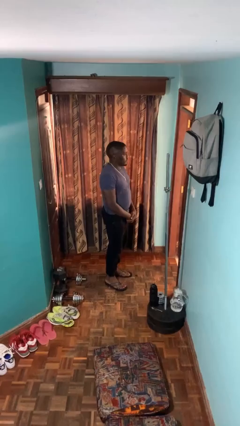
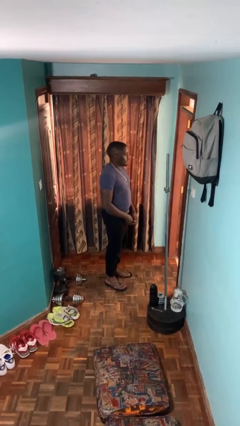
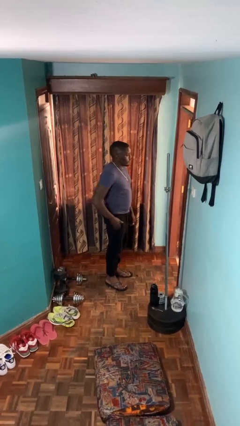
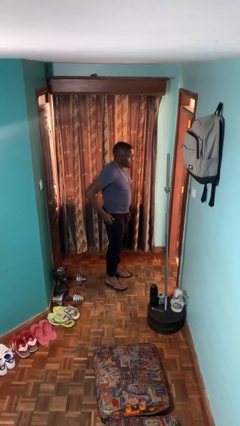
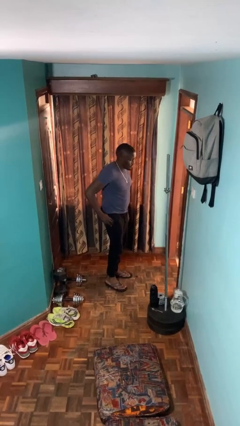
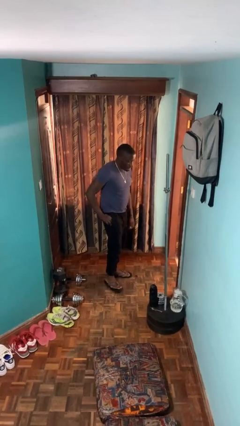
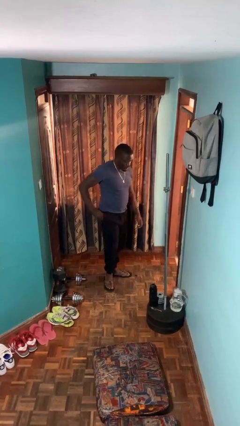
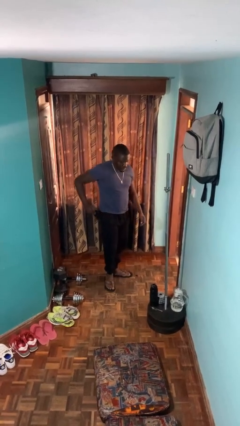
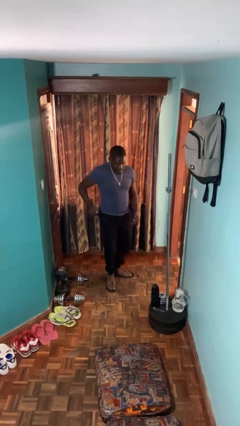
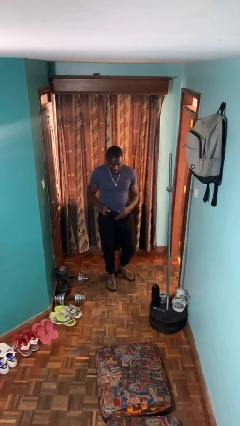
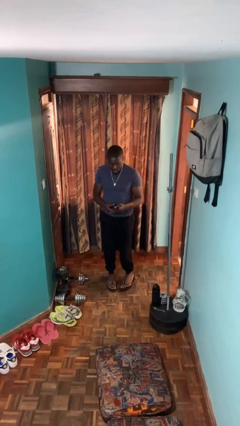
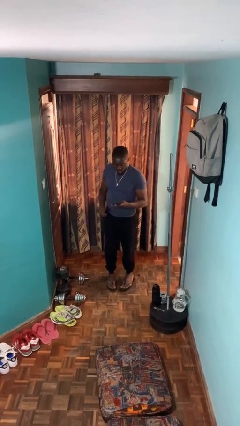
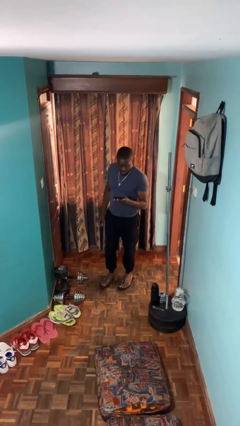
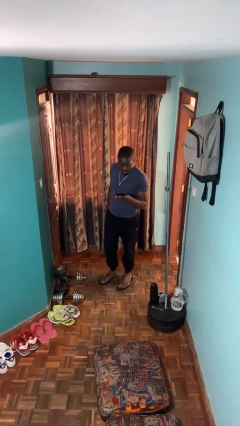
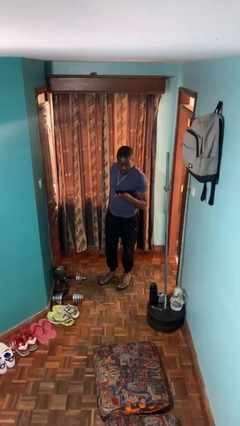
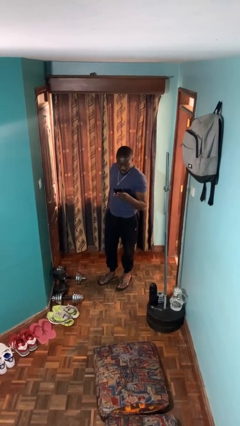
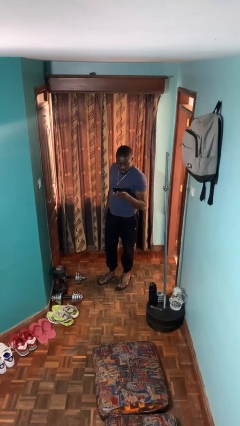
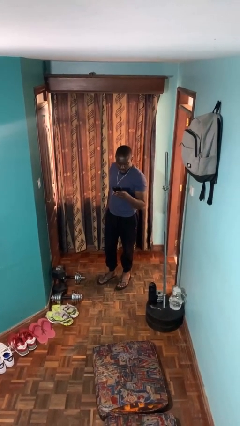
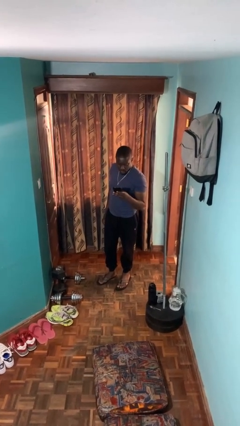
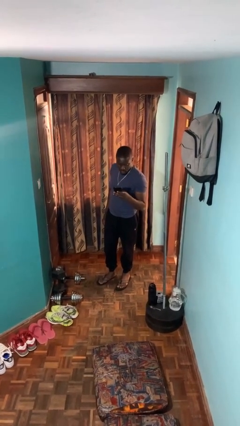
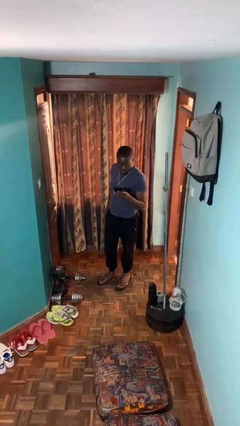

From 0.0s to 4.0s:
person takes phone from pocket

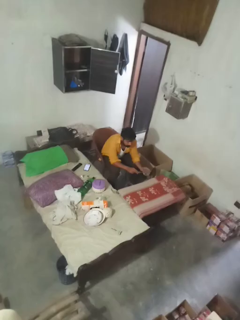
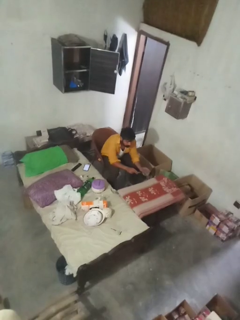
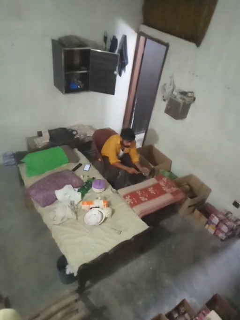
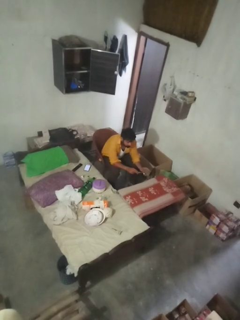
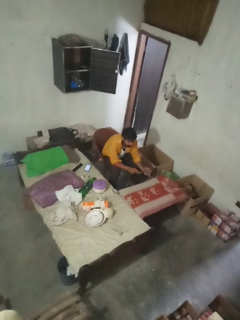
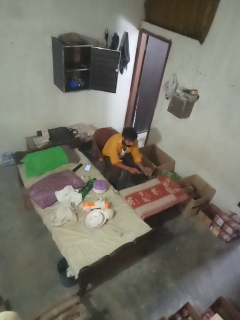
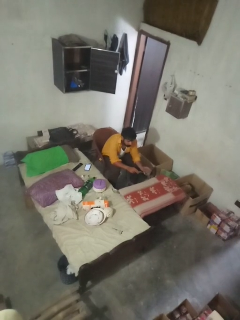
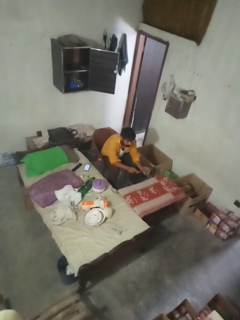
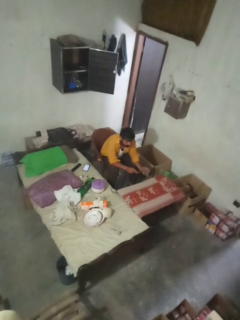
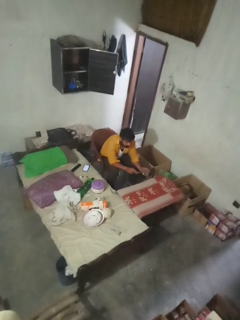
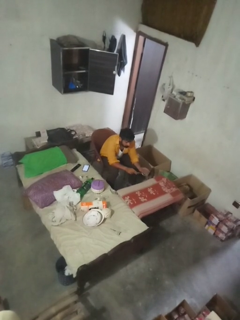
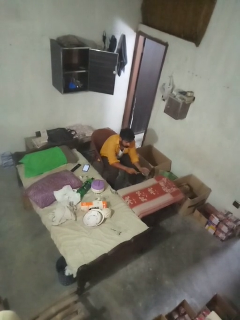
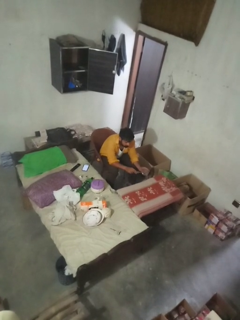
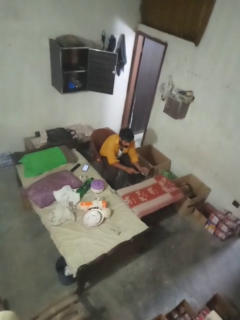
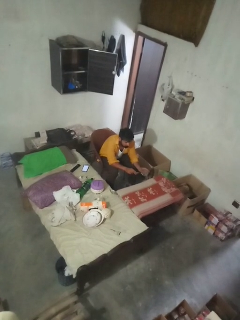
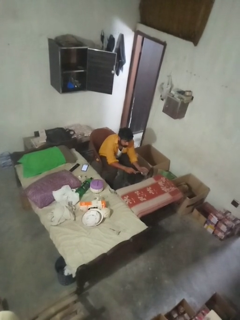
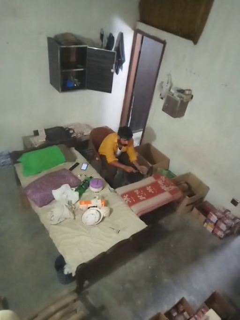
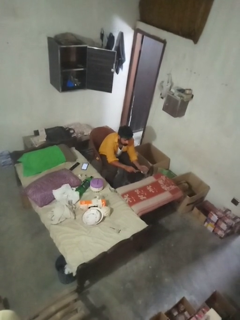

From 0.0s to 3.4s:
person knocks over glass

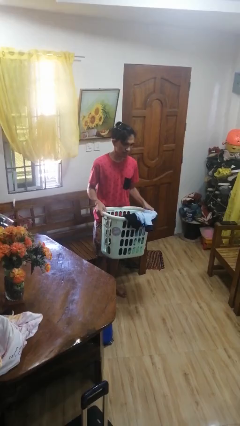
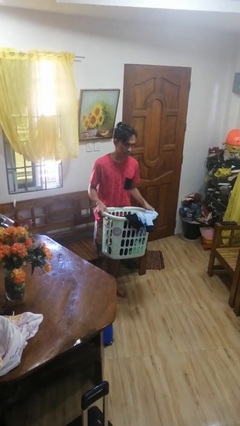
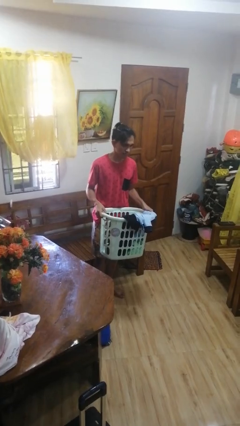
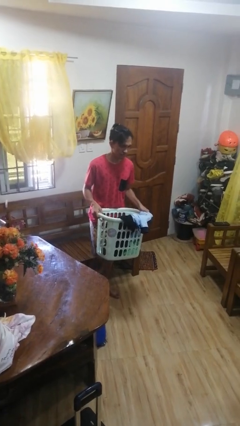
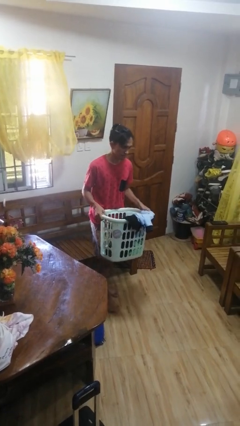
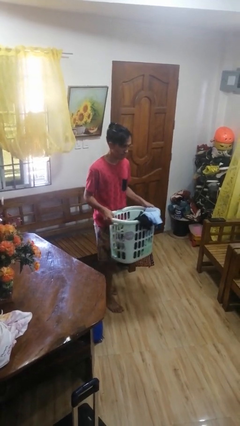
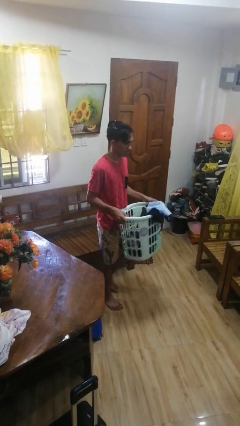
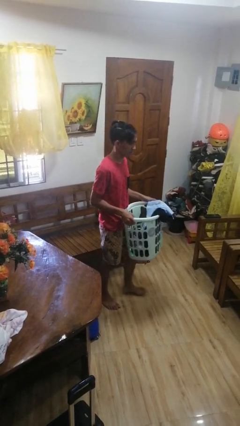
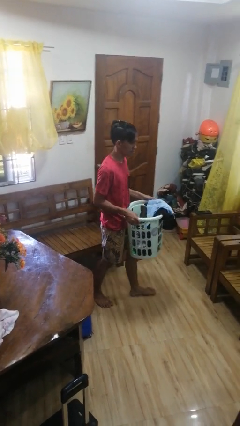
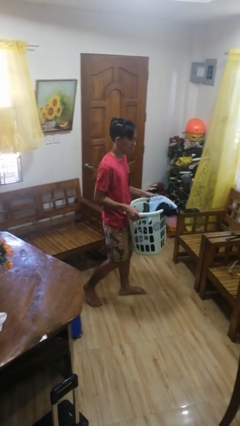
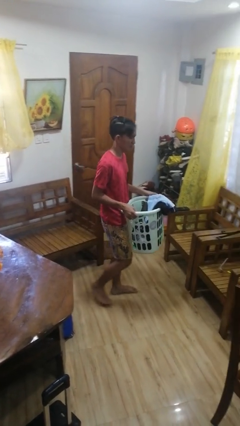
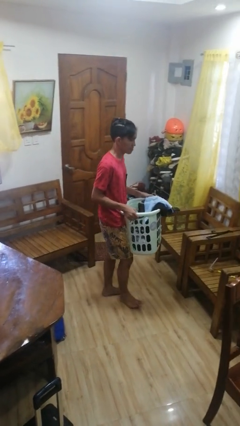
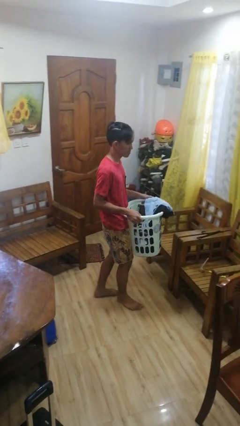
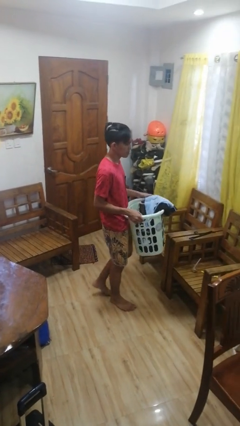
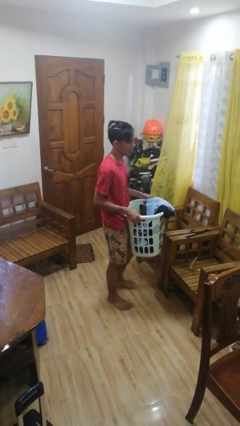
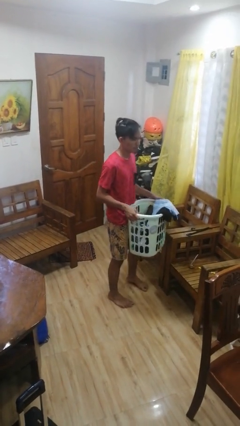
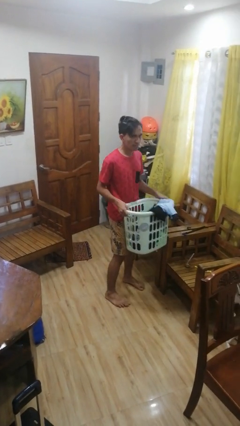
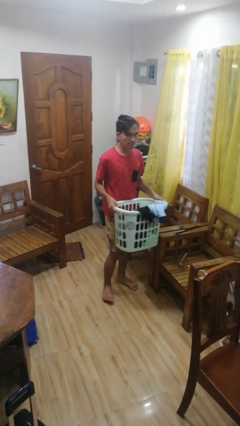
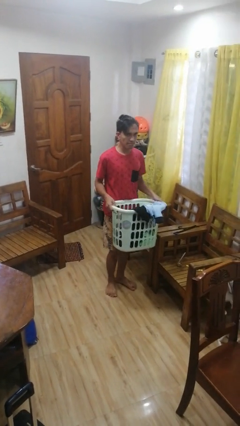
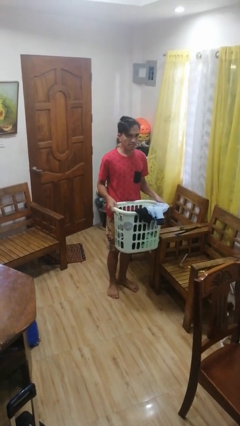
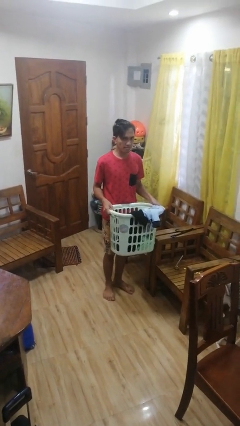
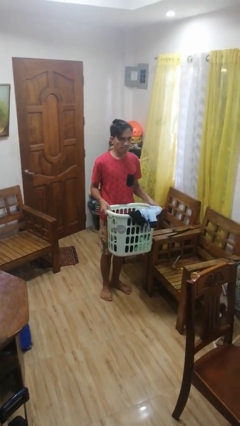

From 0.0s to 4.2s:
person carries laundry basket

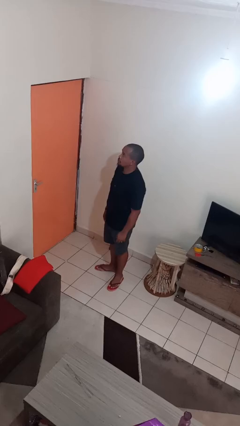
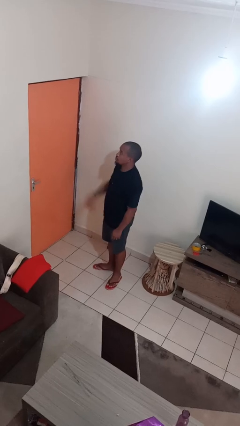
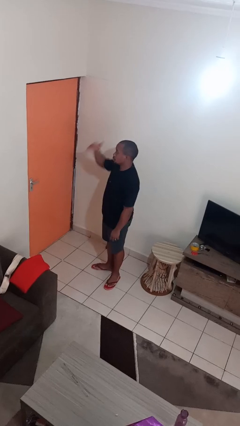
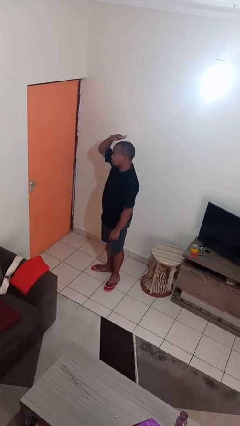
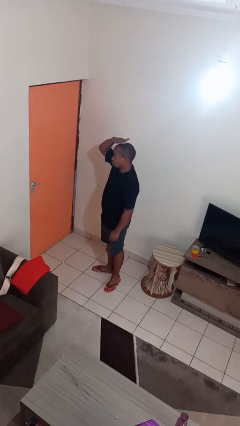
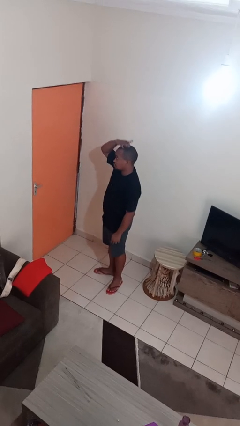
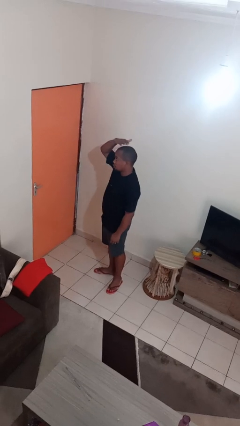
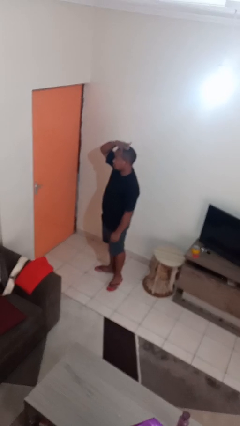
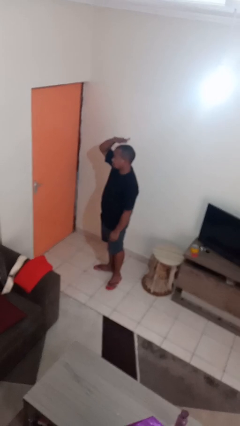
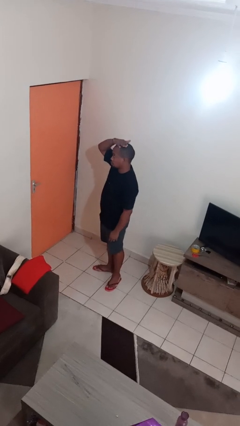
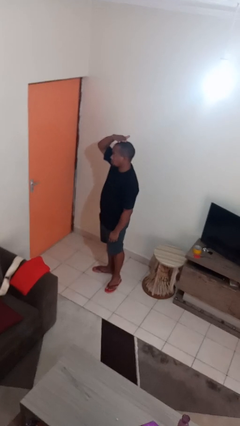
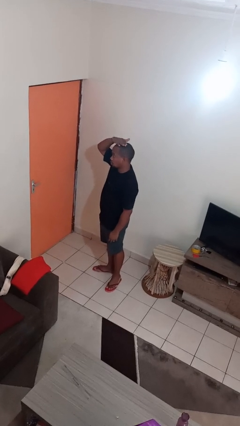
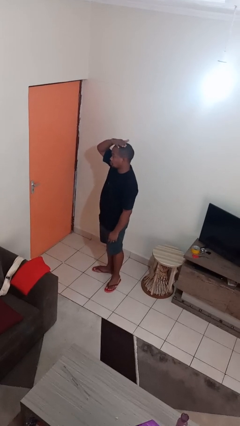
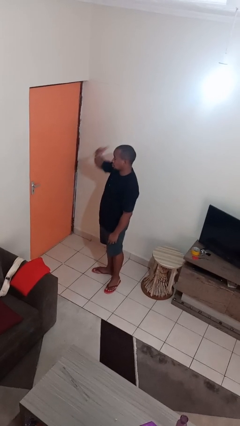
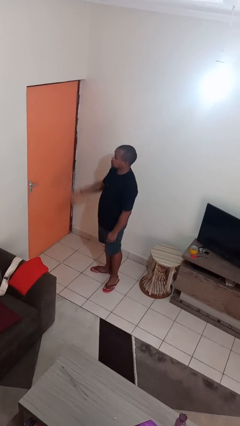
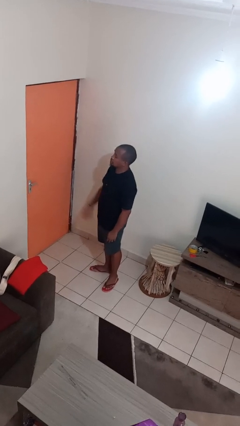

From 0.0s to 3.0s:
person pats head

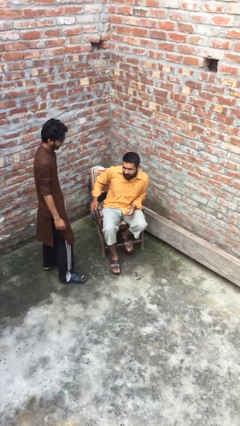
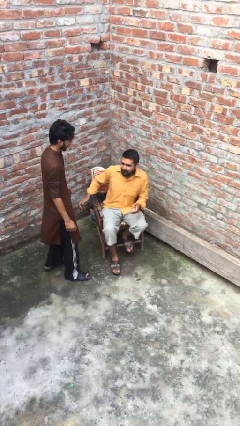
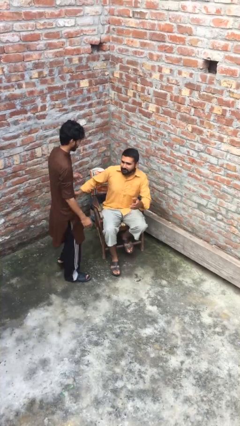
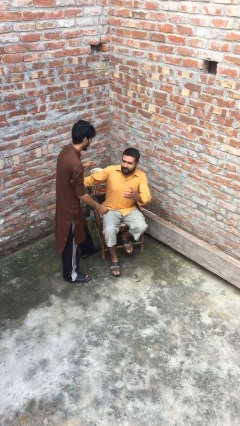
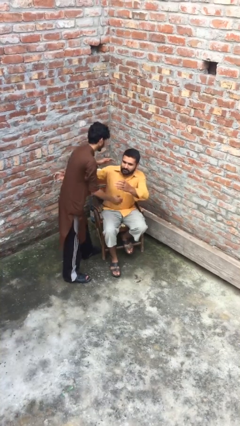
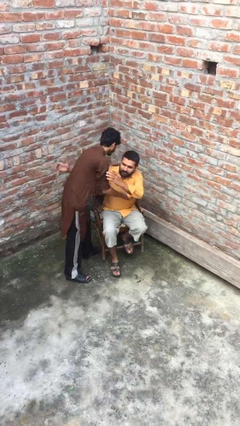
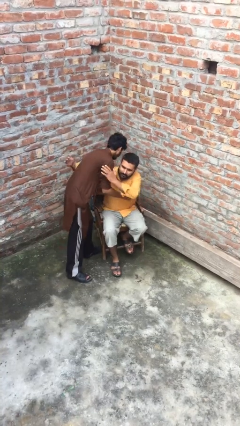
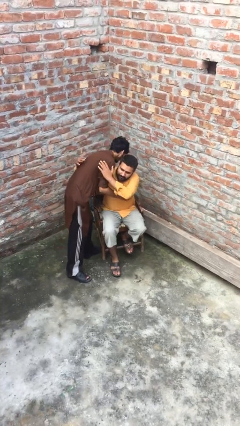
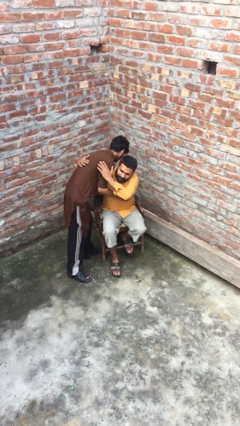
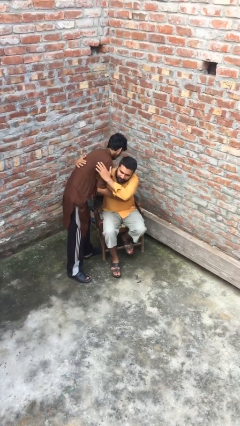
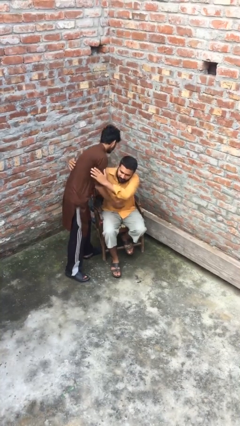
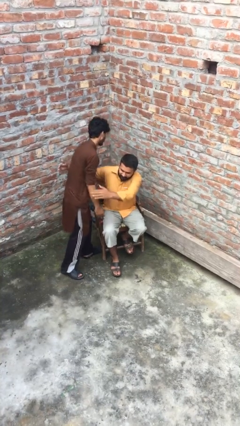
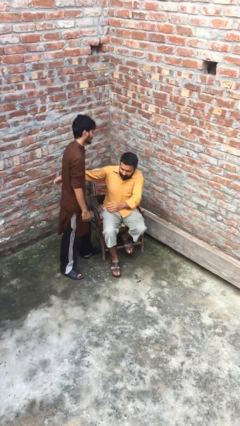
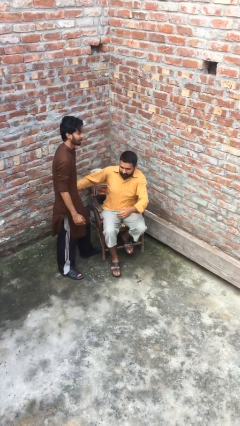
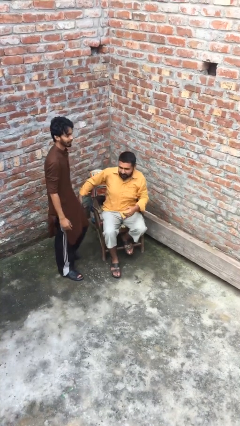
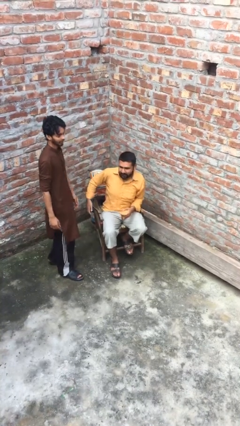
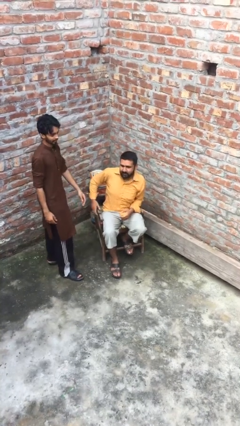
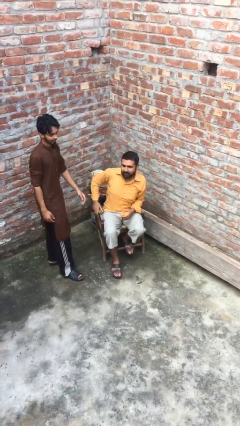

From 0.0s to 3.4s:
person embraces person
